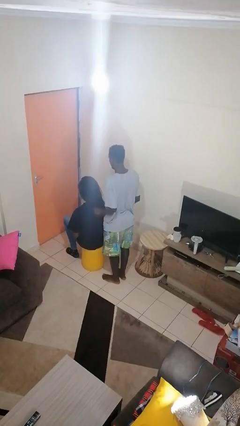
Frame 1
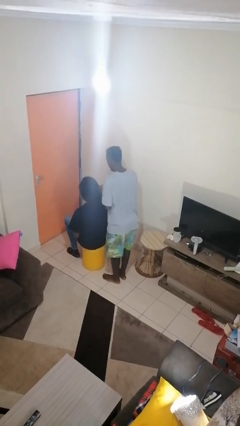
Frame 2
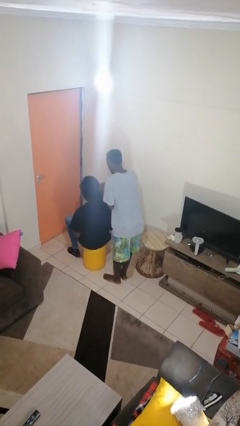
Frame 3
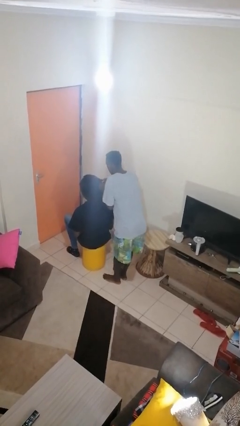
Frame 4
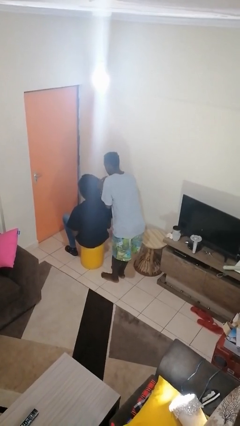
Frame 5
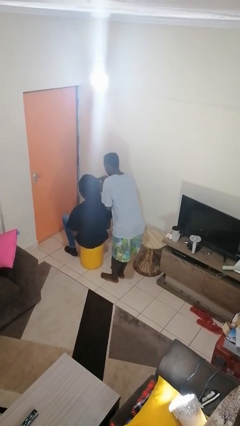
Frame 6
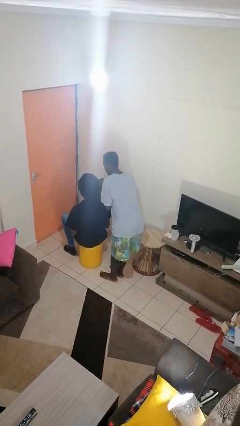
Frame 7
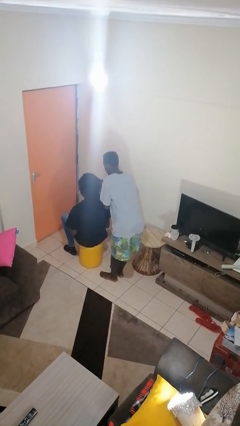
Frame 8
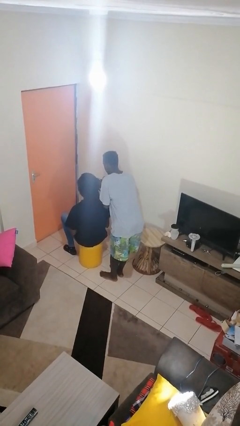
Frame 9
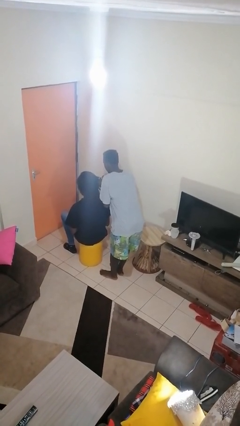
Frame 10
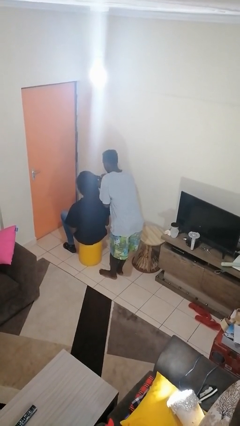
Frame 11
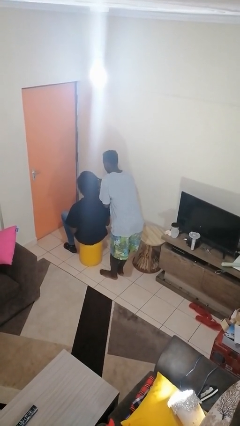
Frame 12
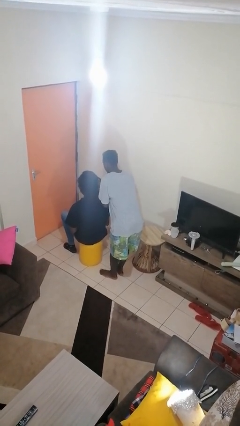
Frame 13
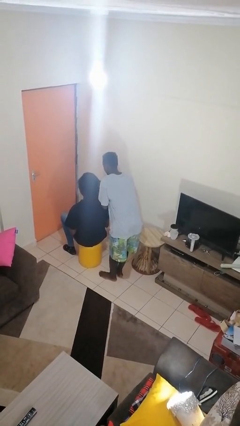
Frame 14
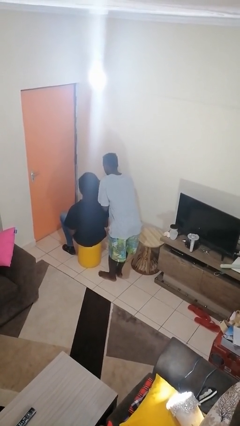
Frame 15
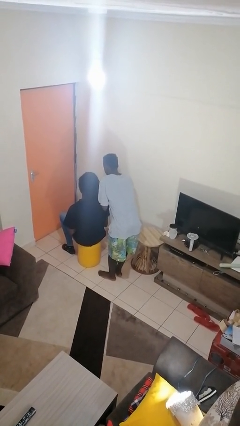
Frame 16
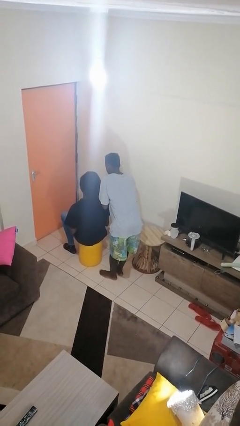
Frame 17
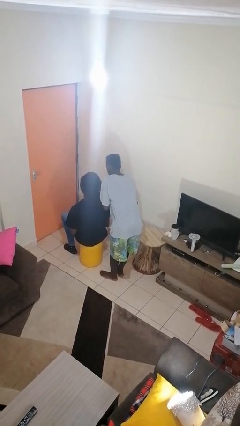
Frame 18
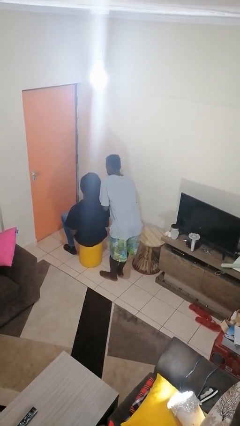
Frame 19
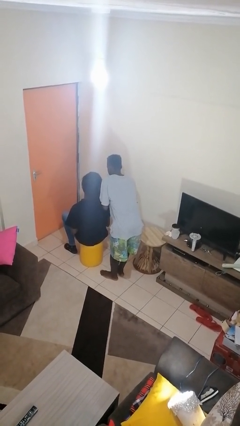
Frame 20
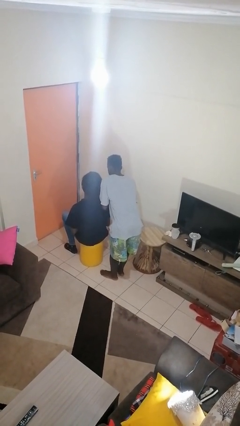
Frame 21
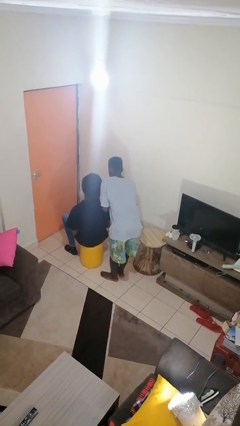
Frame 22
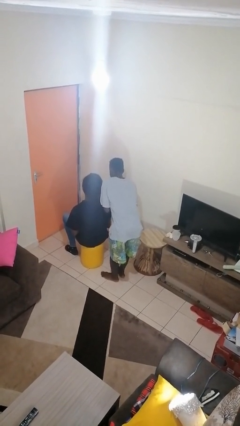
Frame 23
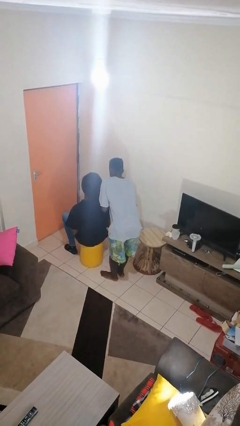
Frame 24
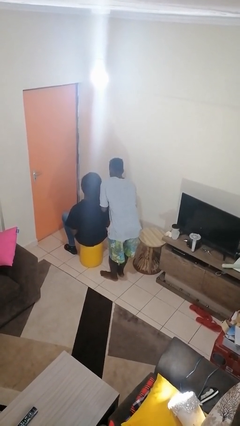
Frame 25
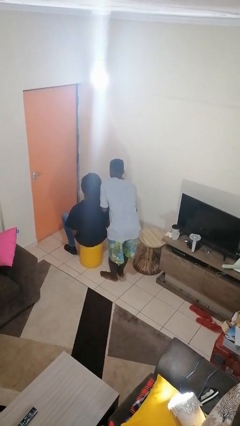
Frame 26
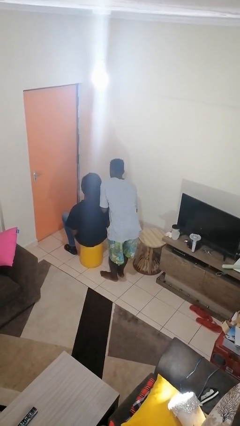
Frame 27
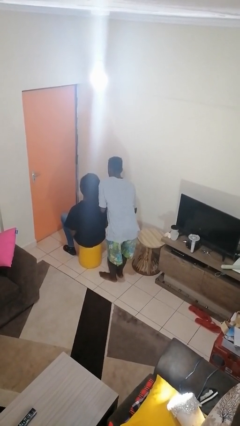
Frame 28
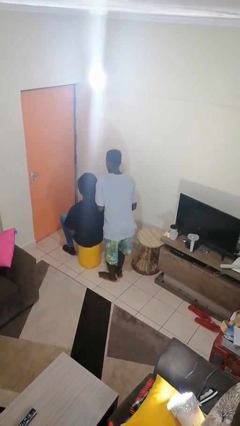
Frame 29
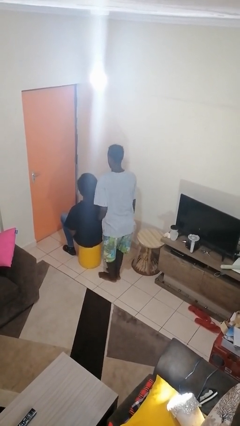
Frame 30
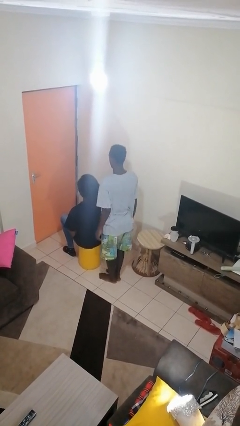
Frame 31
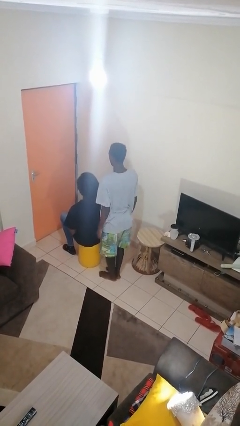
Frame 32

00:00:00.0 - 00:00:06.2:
person braids hair of person

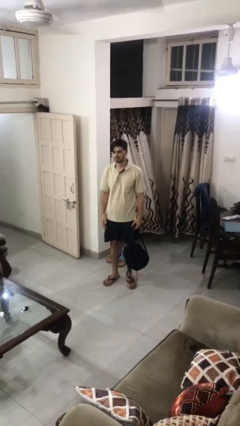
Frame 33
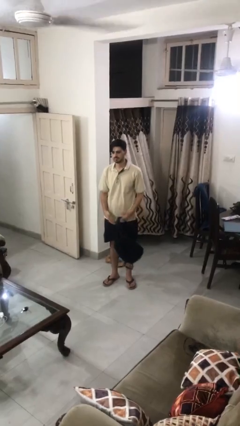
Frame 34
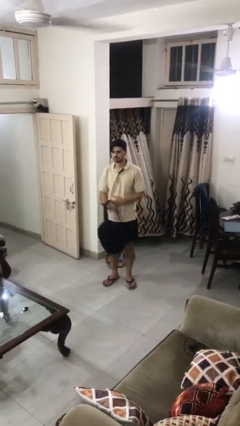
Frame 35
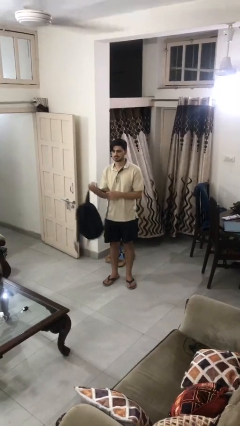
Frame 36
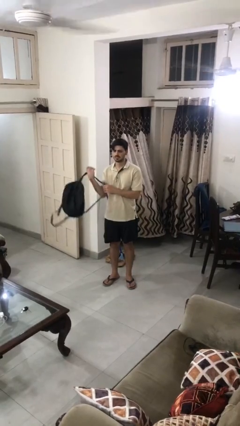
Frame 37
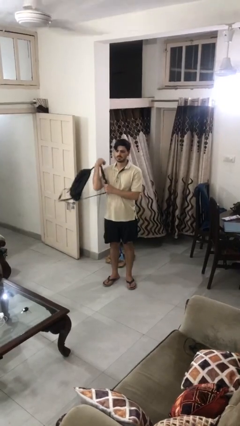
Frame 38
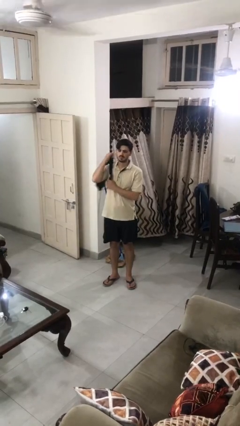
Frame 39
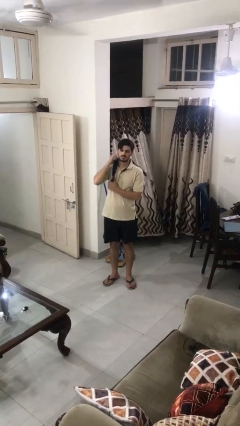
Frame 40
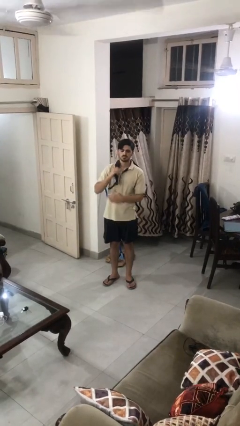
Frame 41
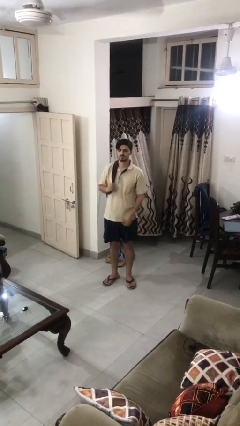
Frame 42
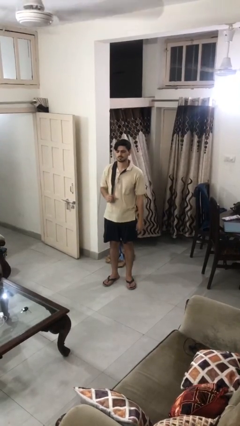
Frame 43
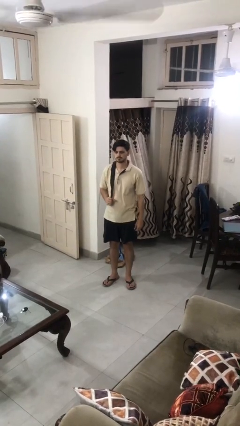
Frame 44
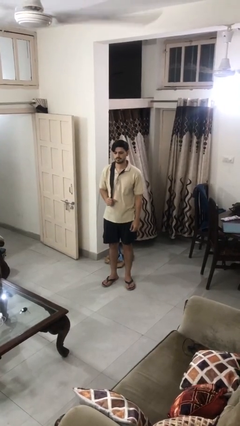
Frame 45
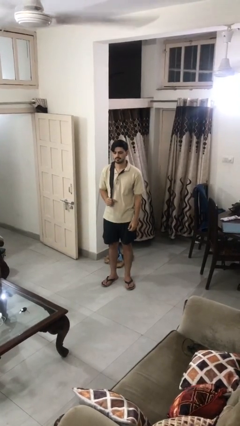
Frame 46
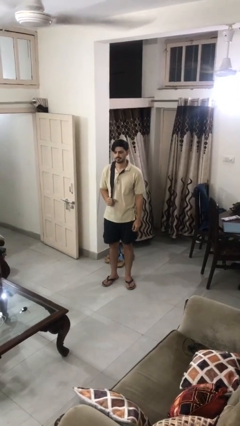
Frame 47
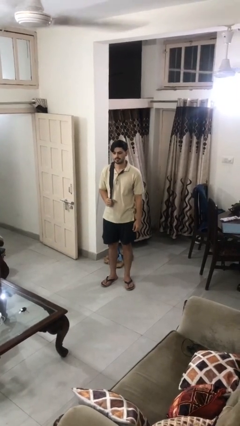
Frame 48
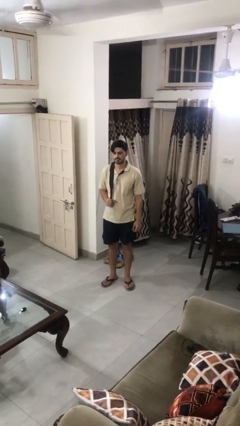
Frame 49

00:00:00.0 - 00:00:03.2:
person puts on backpack

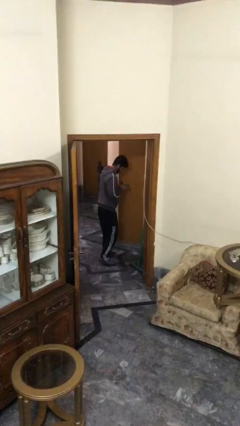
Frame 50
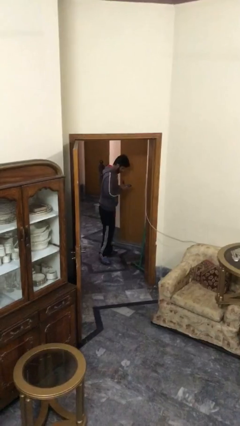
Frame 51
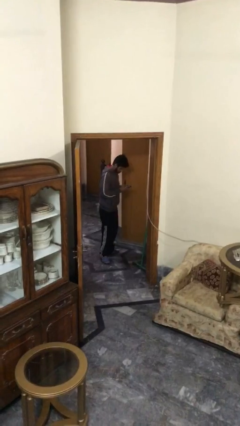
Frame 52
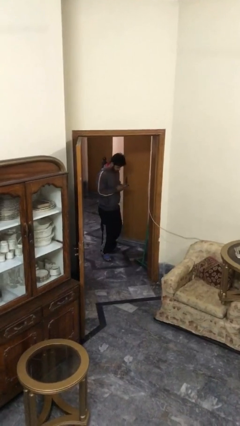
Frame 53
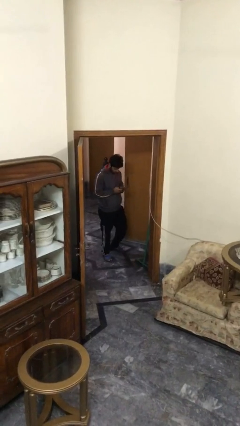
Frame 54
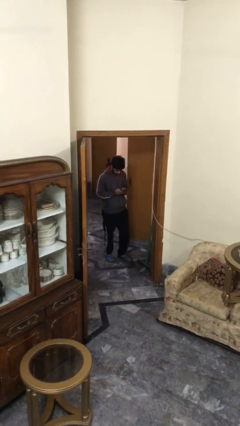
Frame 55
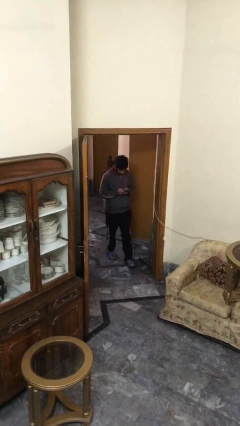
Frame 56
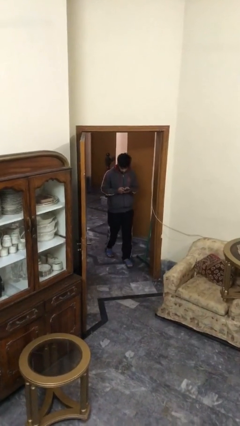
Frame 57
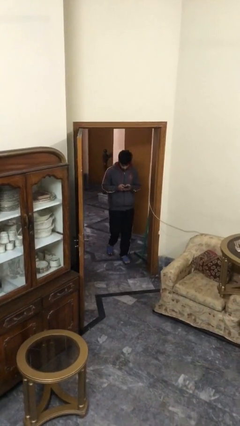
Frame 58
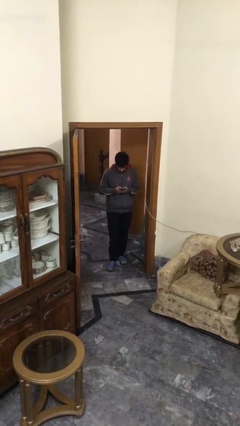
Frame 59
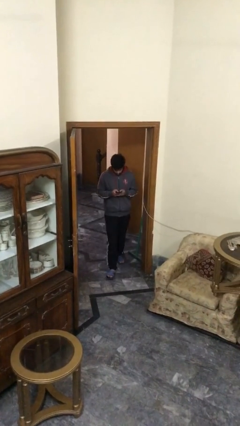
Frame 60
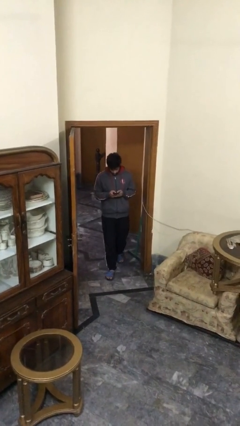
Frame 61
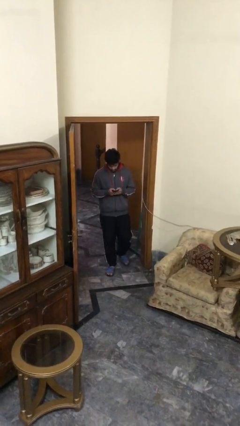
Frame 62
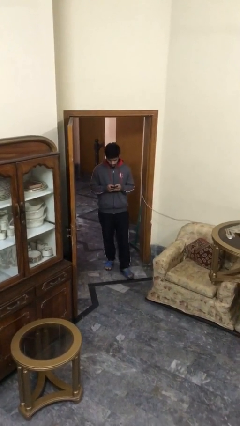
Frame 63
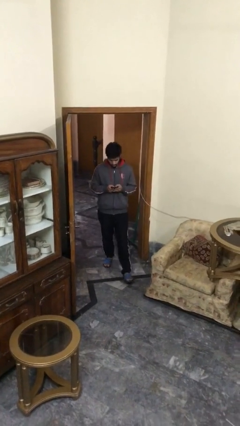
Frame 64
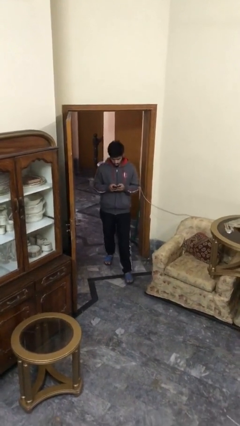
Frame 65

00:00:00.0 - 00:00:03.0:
person enters scene through structure

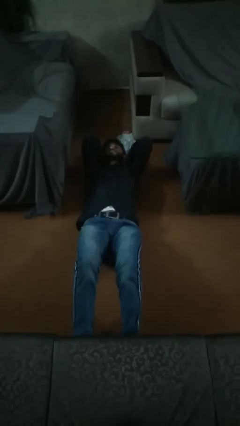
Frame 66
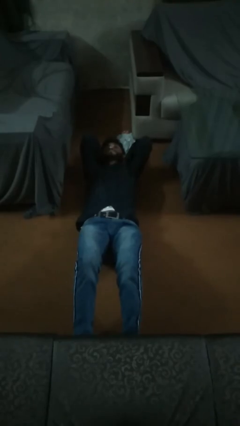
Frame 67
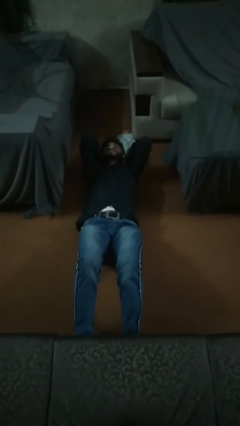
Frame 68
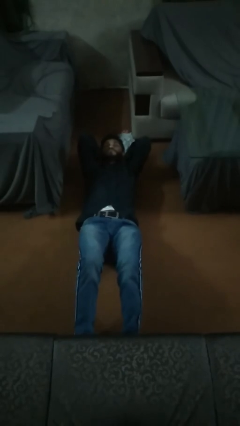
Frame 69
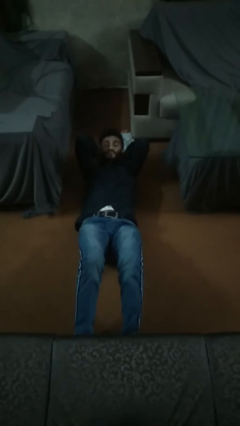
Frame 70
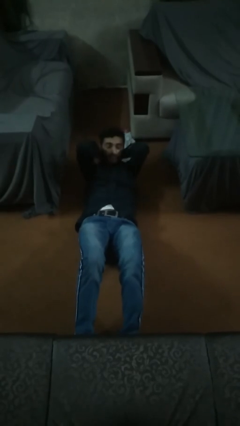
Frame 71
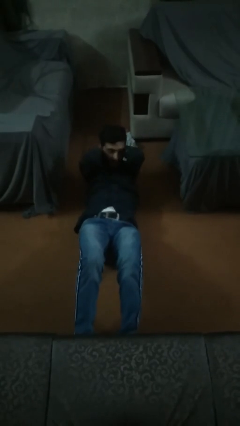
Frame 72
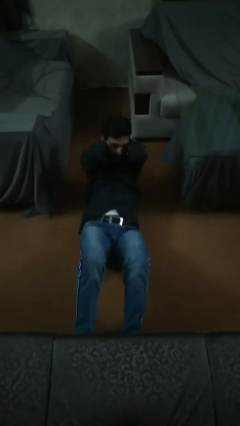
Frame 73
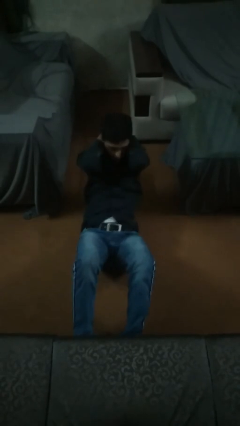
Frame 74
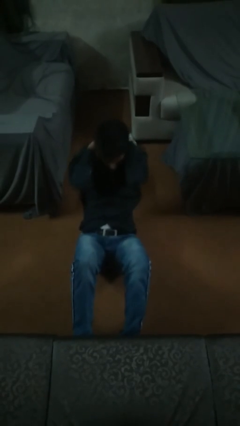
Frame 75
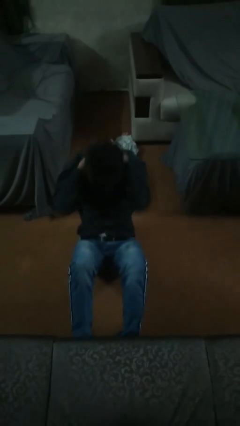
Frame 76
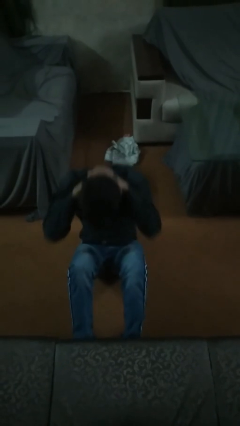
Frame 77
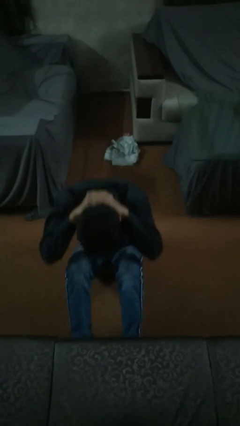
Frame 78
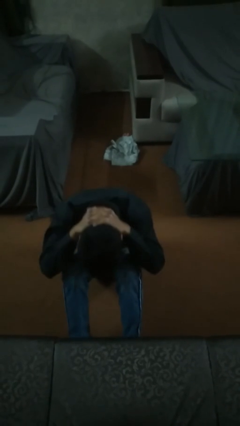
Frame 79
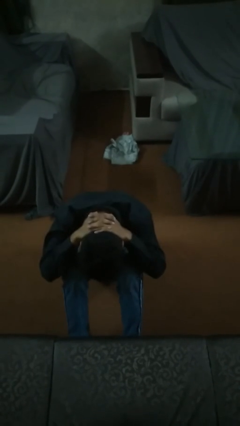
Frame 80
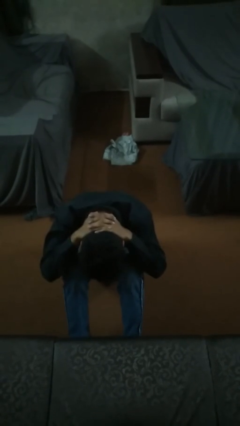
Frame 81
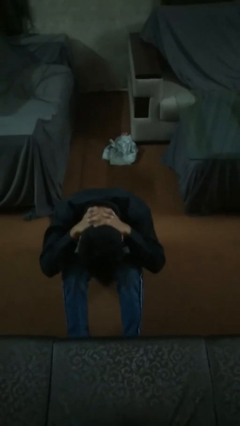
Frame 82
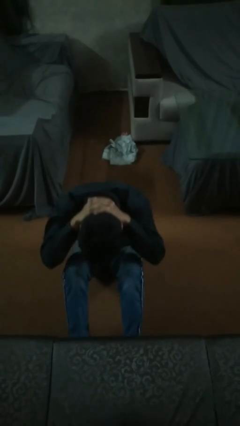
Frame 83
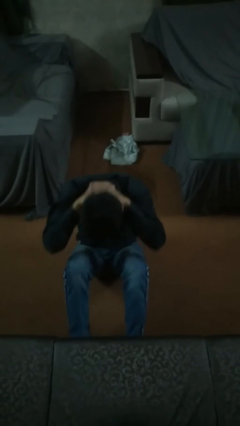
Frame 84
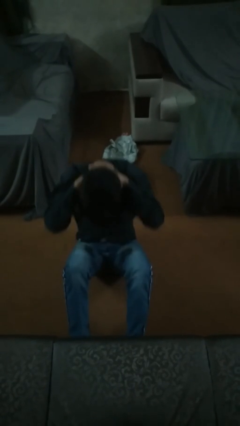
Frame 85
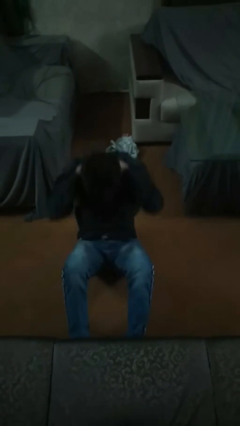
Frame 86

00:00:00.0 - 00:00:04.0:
person exercises with situp

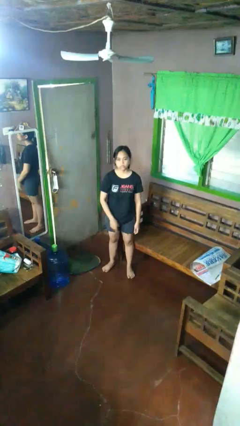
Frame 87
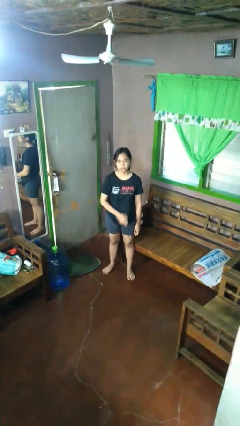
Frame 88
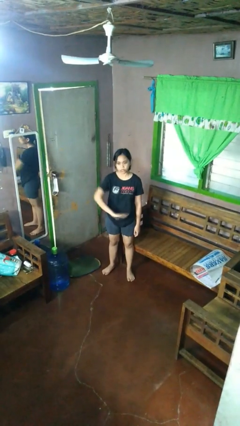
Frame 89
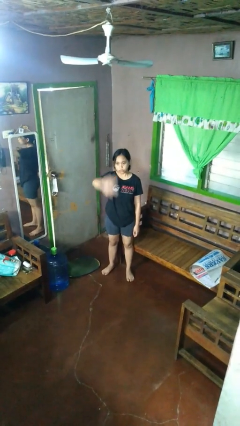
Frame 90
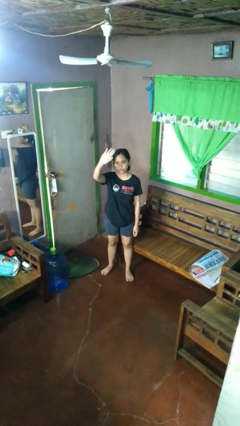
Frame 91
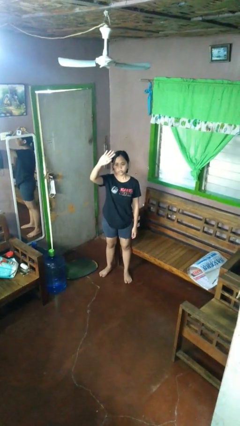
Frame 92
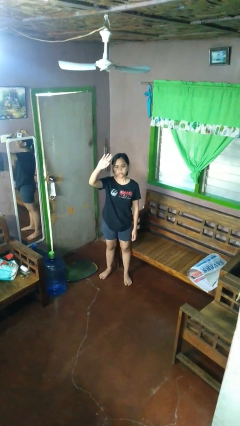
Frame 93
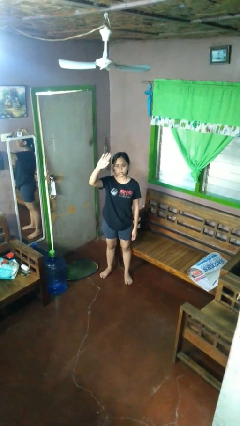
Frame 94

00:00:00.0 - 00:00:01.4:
person gestures swipe up
